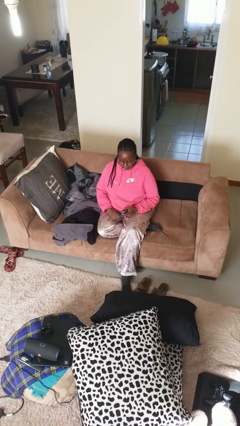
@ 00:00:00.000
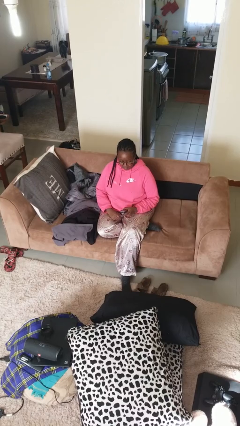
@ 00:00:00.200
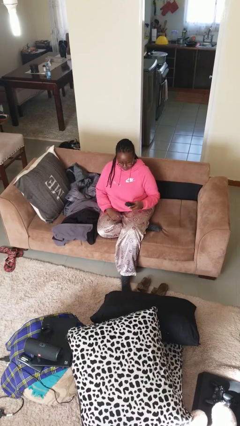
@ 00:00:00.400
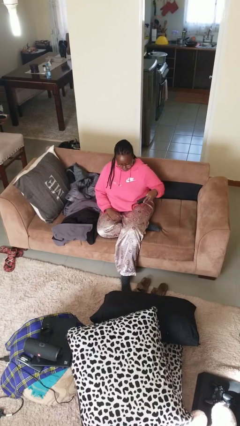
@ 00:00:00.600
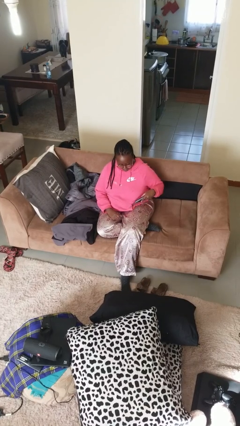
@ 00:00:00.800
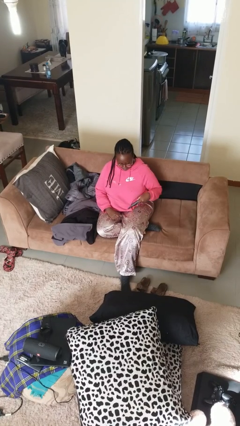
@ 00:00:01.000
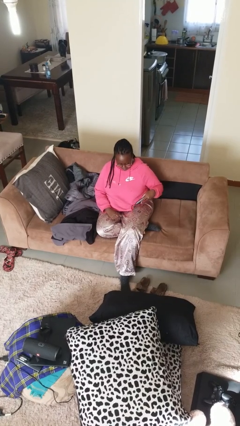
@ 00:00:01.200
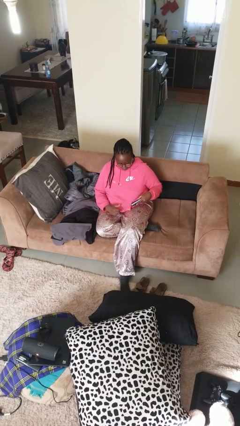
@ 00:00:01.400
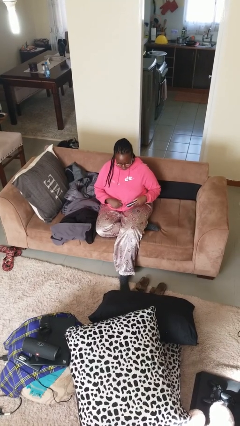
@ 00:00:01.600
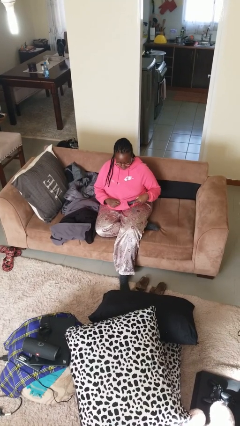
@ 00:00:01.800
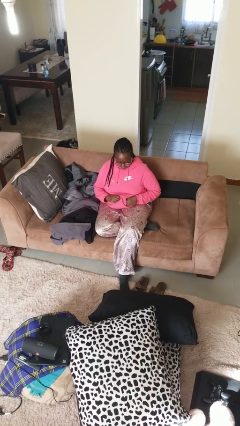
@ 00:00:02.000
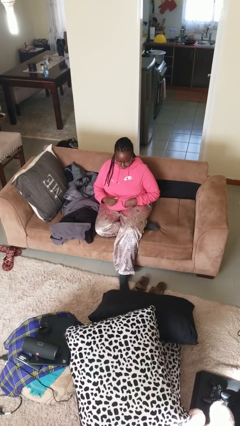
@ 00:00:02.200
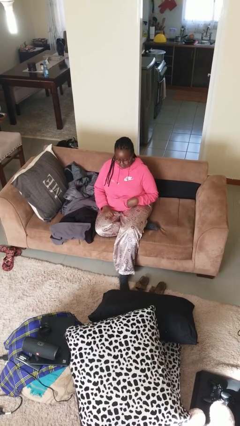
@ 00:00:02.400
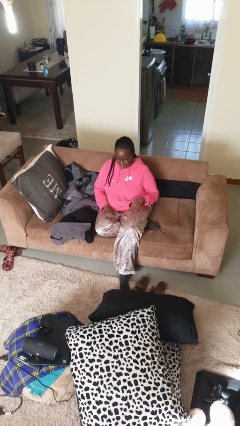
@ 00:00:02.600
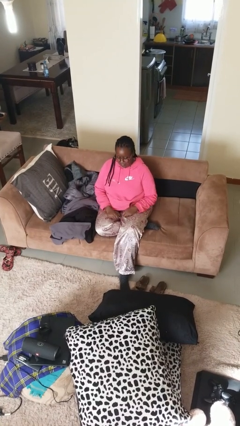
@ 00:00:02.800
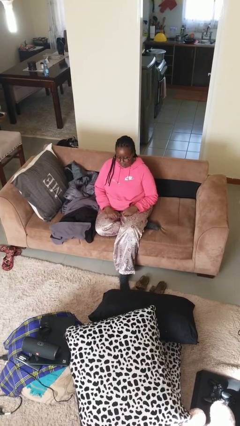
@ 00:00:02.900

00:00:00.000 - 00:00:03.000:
person puts phone into pocket

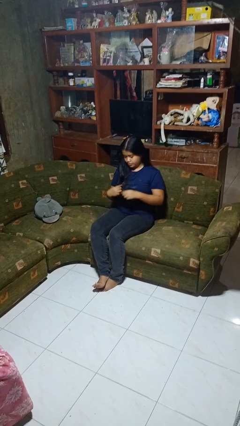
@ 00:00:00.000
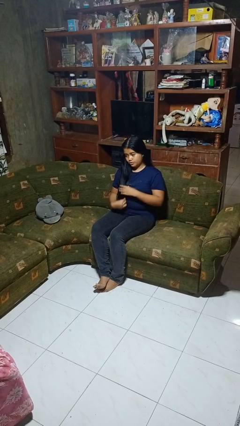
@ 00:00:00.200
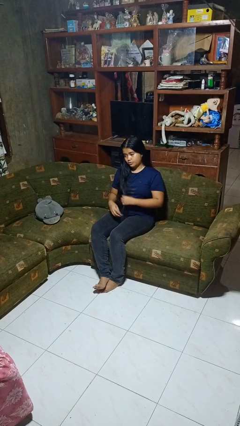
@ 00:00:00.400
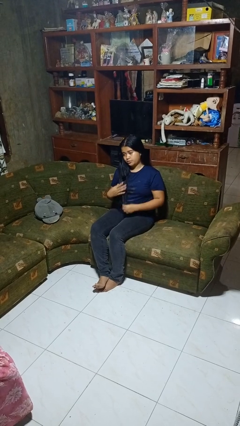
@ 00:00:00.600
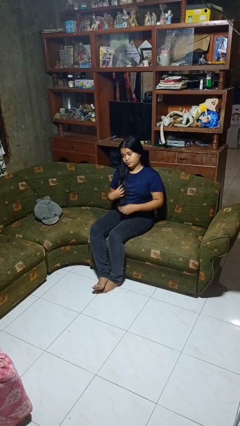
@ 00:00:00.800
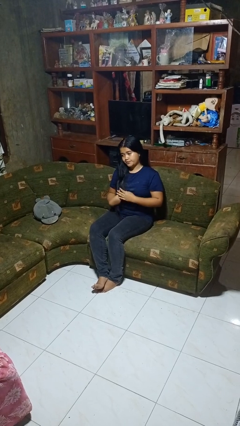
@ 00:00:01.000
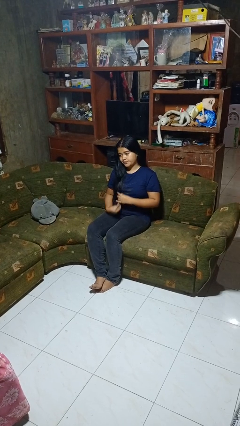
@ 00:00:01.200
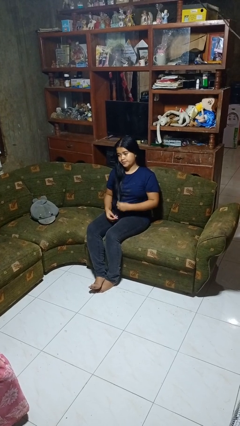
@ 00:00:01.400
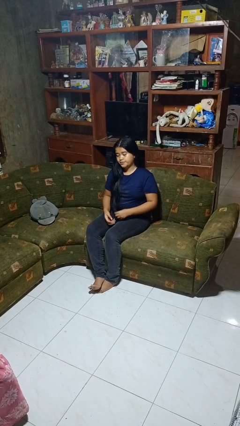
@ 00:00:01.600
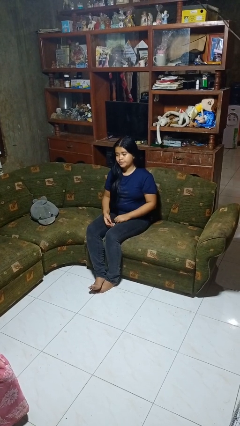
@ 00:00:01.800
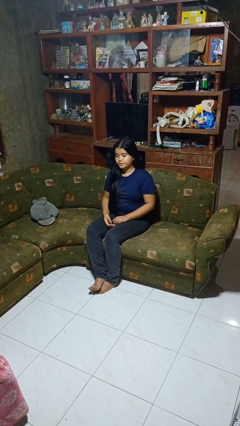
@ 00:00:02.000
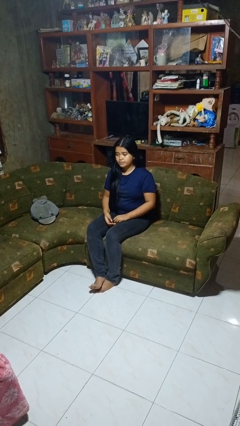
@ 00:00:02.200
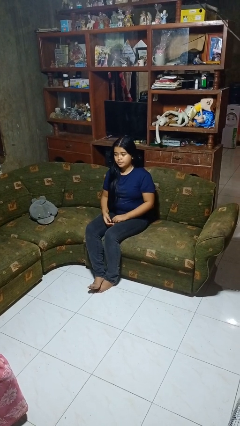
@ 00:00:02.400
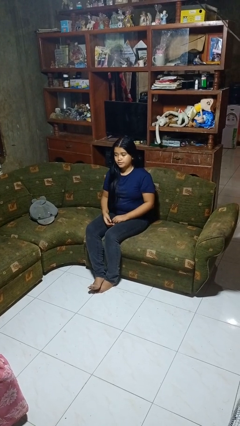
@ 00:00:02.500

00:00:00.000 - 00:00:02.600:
person strokes hair

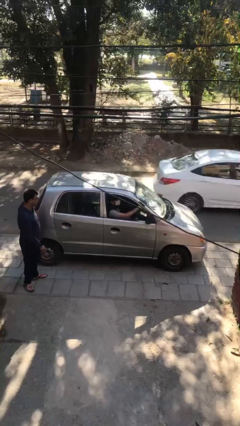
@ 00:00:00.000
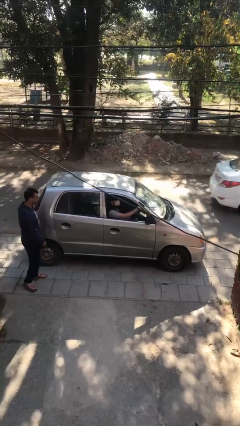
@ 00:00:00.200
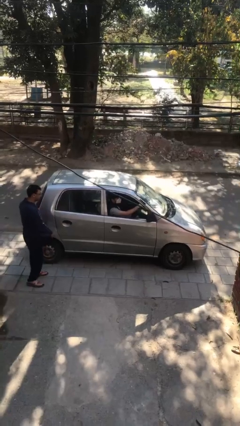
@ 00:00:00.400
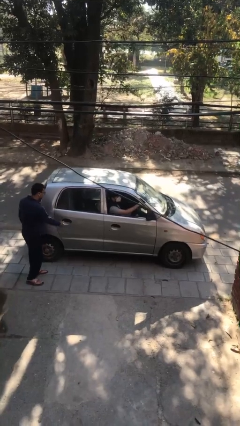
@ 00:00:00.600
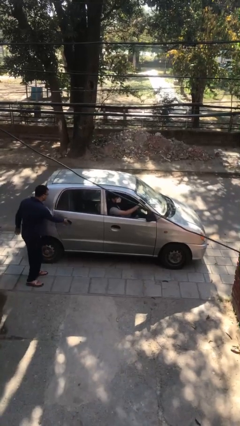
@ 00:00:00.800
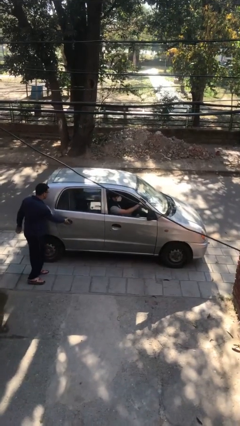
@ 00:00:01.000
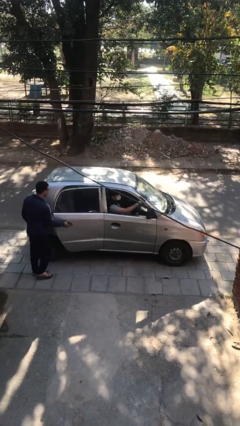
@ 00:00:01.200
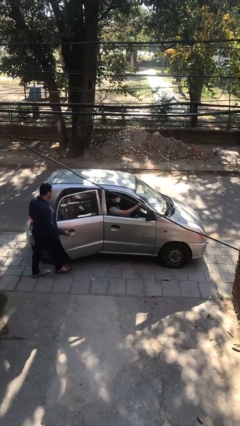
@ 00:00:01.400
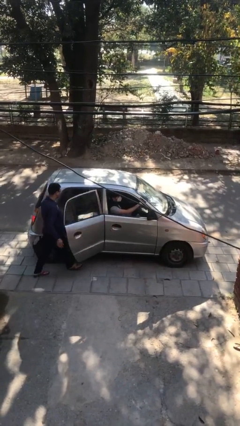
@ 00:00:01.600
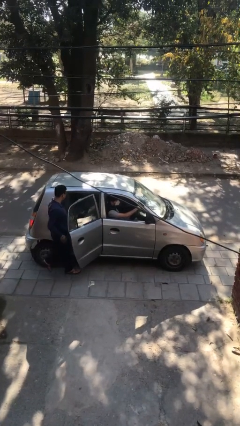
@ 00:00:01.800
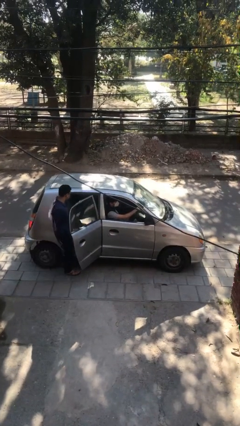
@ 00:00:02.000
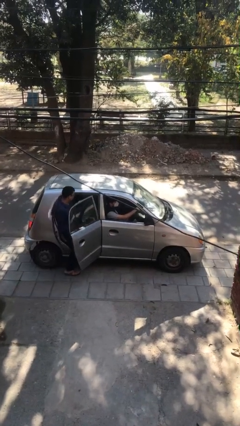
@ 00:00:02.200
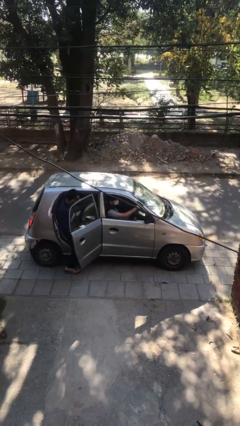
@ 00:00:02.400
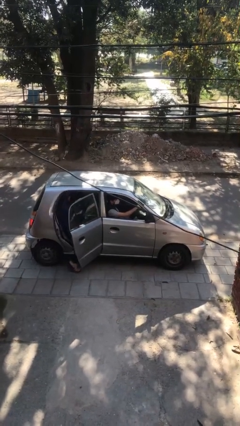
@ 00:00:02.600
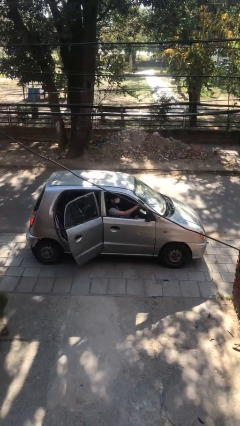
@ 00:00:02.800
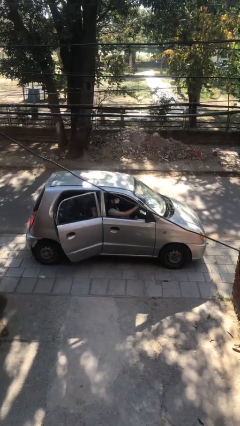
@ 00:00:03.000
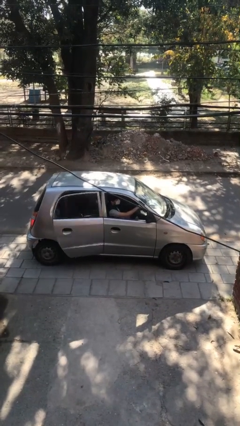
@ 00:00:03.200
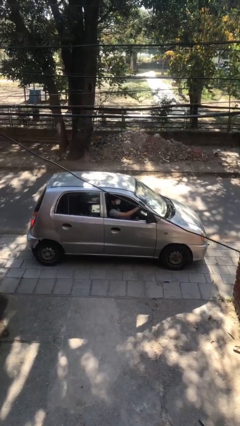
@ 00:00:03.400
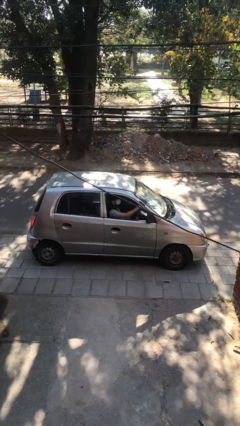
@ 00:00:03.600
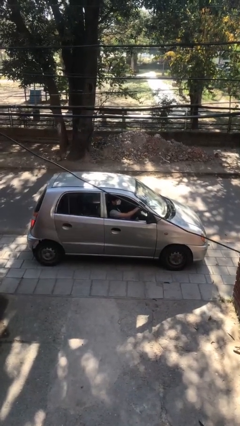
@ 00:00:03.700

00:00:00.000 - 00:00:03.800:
car picks up person

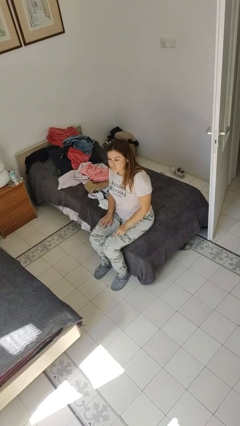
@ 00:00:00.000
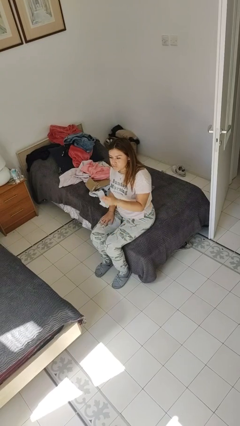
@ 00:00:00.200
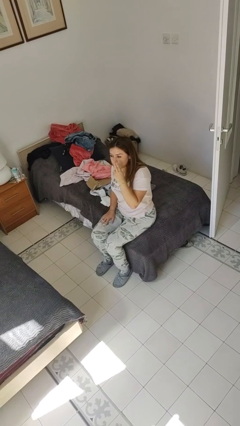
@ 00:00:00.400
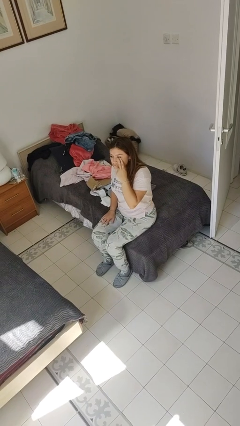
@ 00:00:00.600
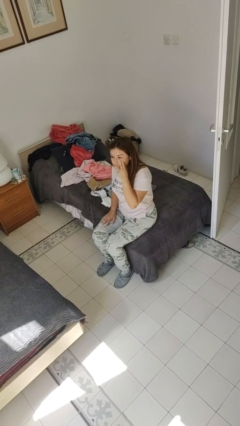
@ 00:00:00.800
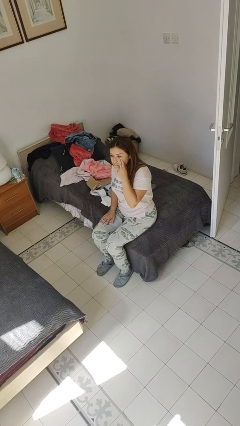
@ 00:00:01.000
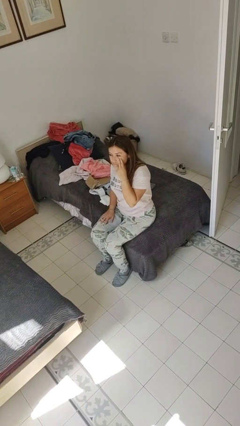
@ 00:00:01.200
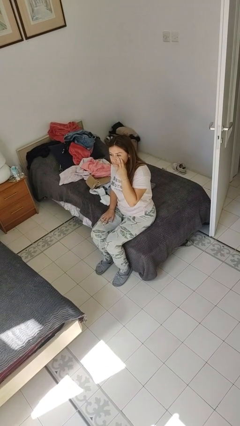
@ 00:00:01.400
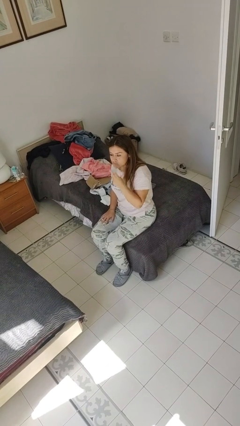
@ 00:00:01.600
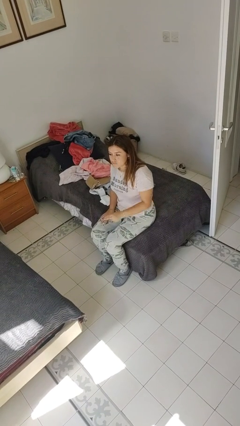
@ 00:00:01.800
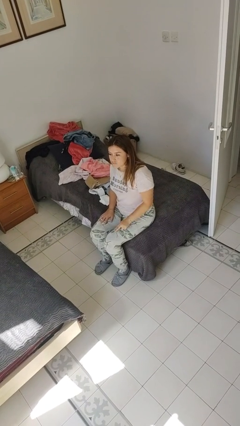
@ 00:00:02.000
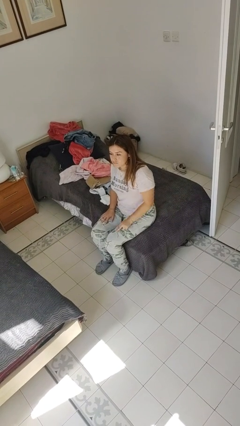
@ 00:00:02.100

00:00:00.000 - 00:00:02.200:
person gestures watch closely

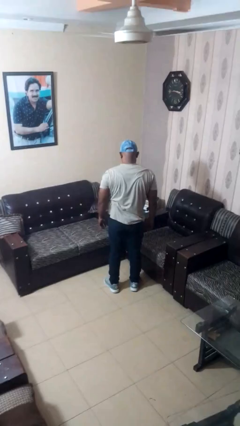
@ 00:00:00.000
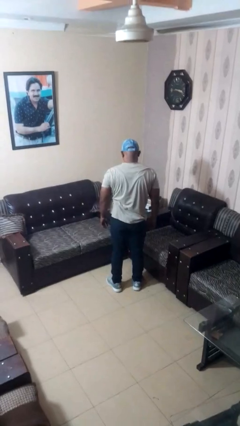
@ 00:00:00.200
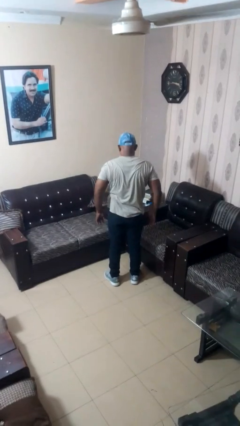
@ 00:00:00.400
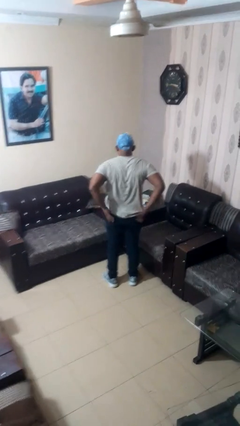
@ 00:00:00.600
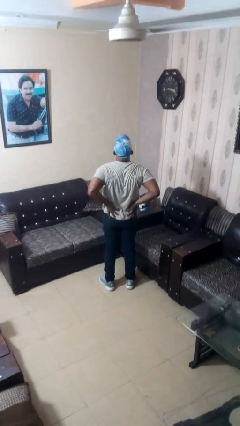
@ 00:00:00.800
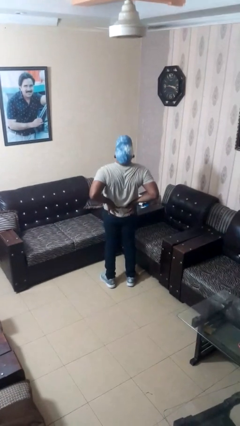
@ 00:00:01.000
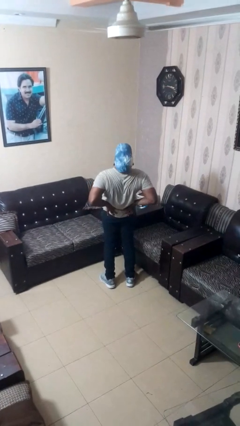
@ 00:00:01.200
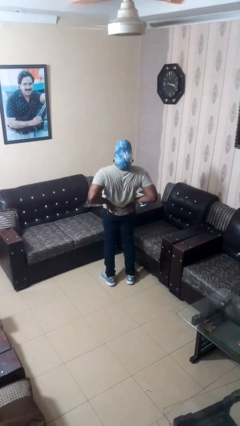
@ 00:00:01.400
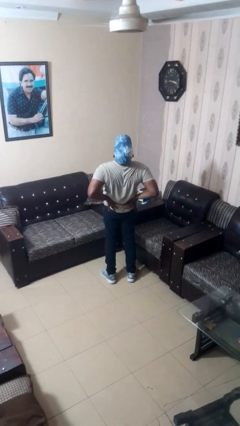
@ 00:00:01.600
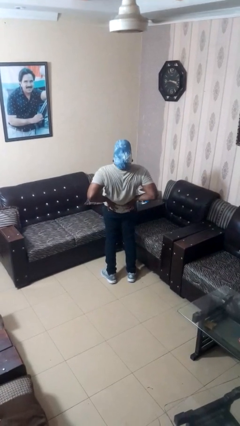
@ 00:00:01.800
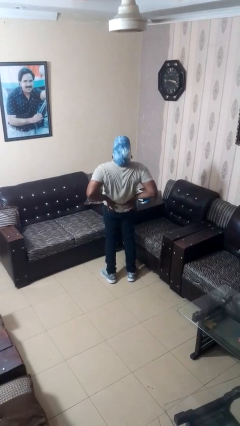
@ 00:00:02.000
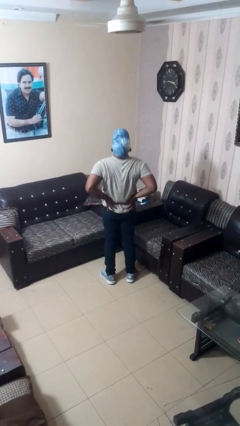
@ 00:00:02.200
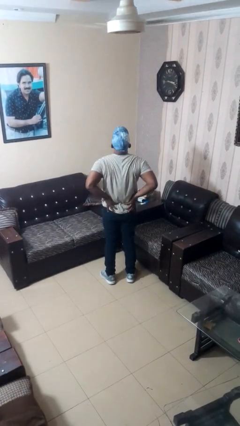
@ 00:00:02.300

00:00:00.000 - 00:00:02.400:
person stretches back

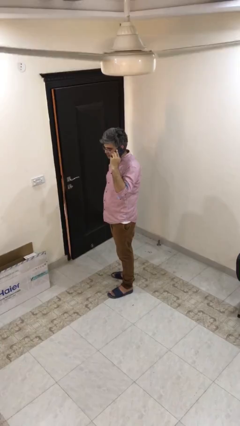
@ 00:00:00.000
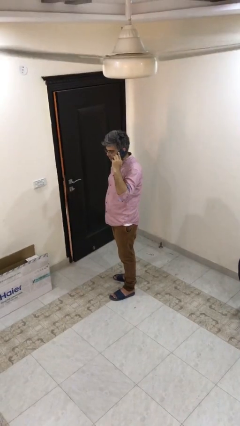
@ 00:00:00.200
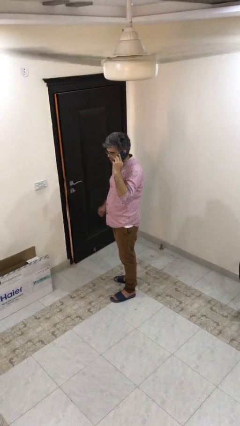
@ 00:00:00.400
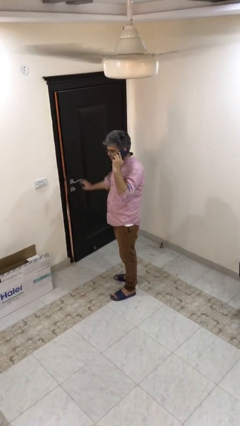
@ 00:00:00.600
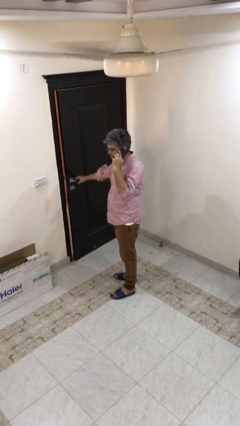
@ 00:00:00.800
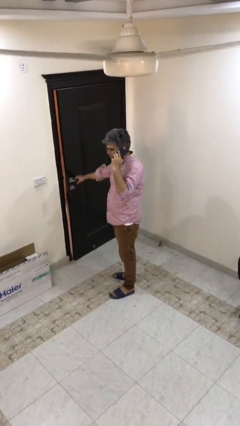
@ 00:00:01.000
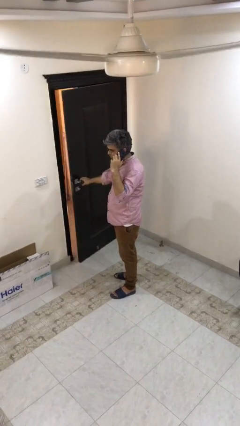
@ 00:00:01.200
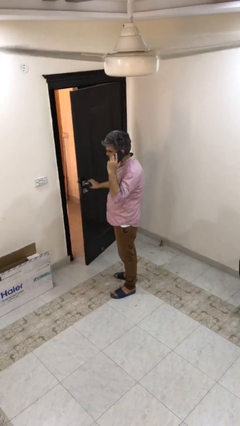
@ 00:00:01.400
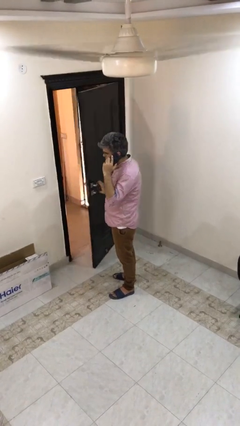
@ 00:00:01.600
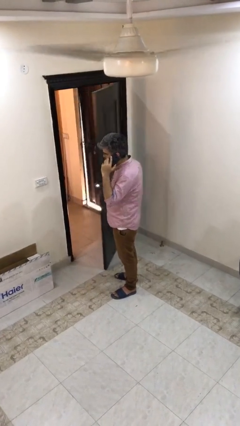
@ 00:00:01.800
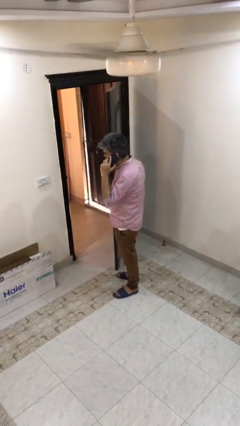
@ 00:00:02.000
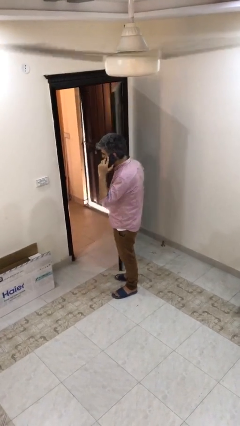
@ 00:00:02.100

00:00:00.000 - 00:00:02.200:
person opens facility door

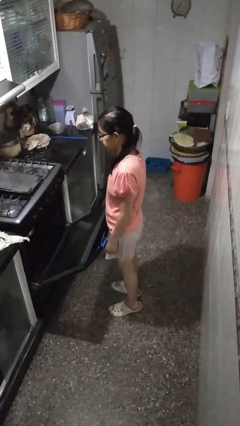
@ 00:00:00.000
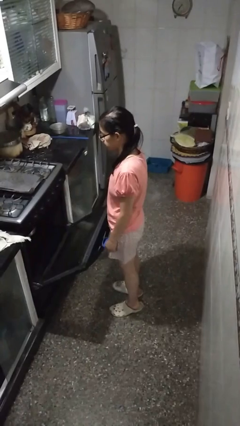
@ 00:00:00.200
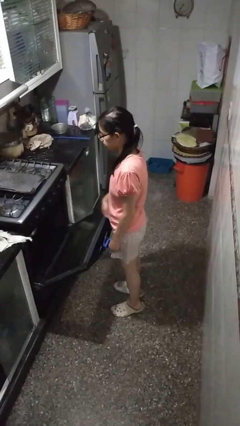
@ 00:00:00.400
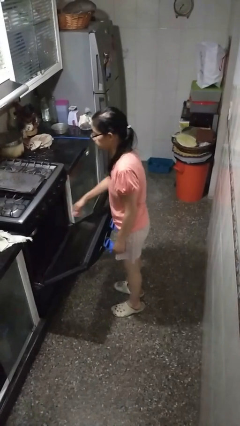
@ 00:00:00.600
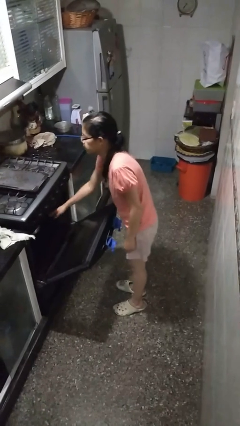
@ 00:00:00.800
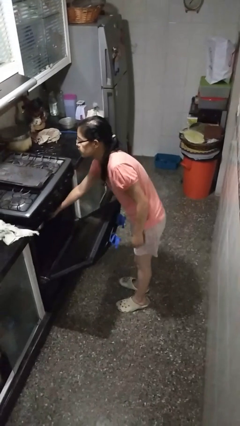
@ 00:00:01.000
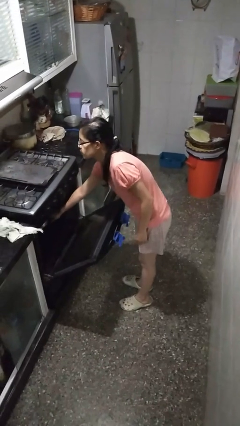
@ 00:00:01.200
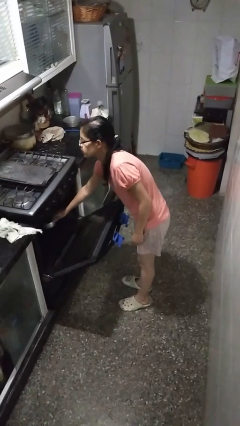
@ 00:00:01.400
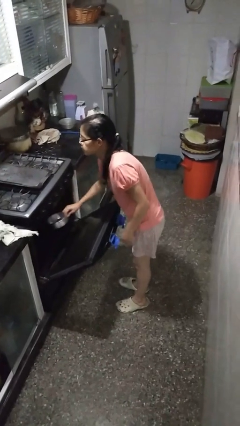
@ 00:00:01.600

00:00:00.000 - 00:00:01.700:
person takes object from oven
